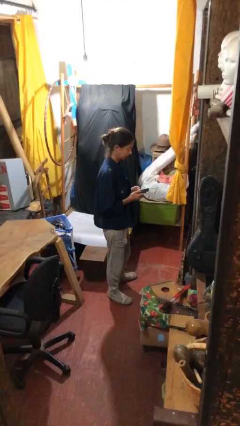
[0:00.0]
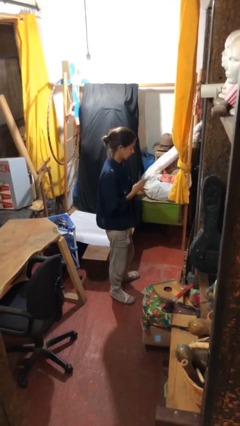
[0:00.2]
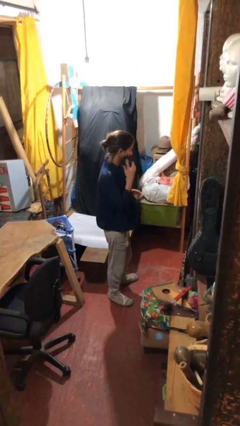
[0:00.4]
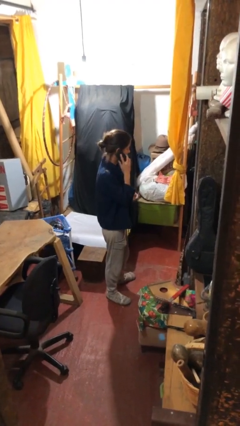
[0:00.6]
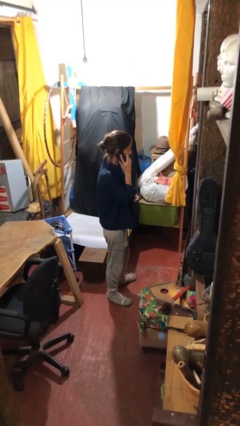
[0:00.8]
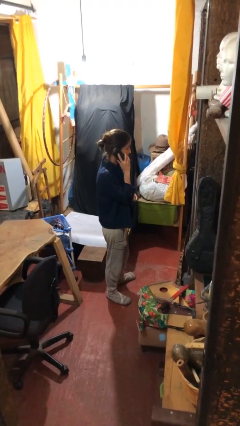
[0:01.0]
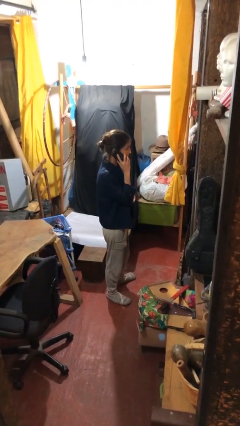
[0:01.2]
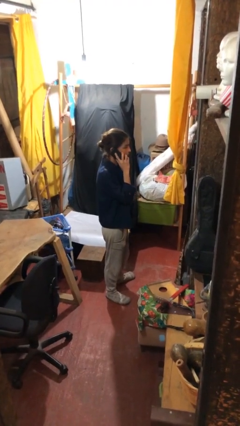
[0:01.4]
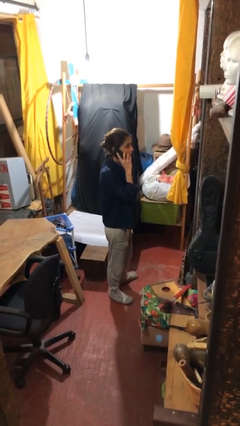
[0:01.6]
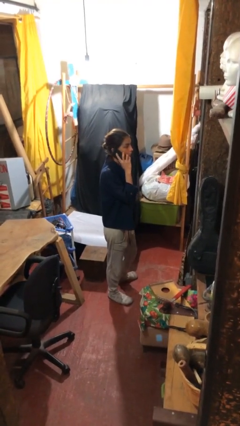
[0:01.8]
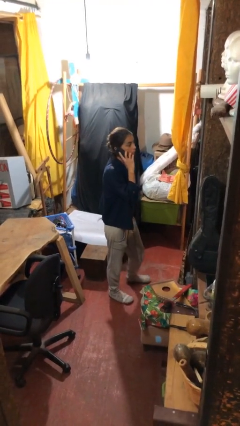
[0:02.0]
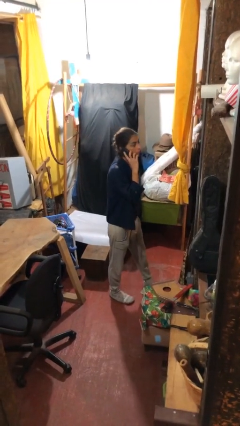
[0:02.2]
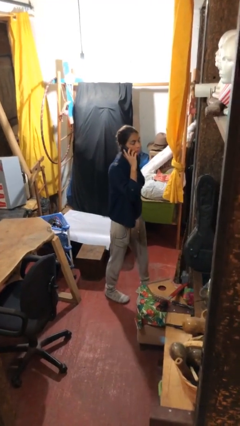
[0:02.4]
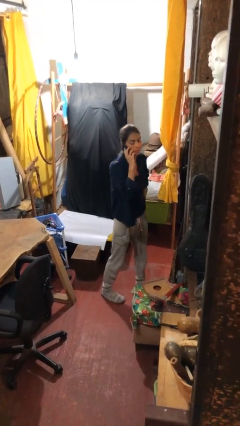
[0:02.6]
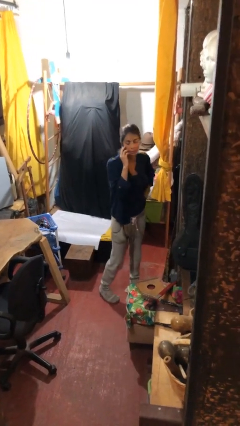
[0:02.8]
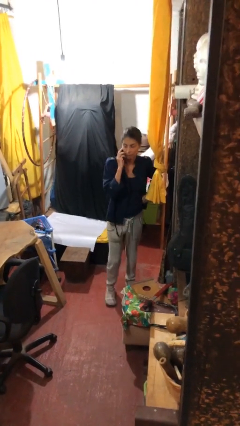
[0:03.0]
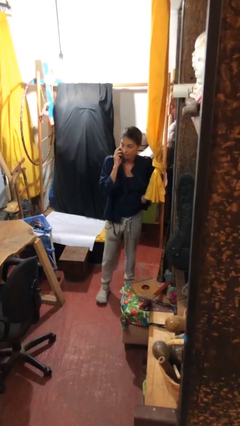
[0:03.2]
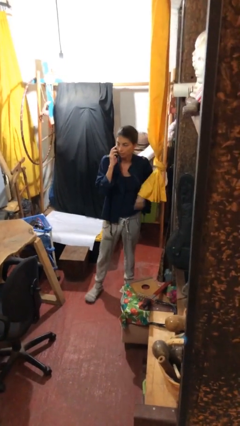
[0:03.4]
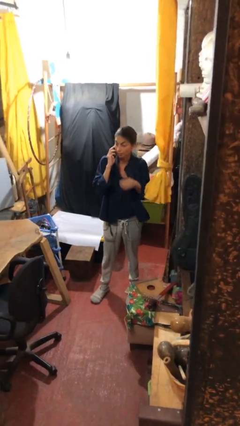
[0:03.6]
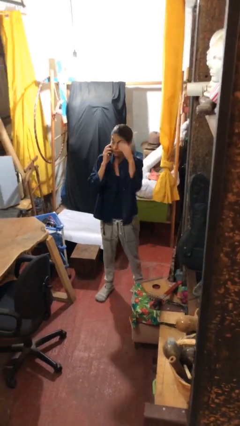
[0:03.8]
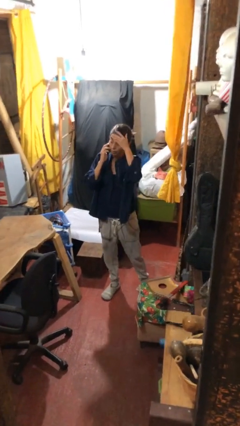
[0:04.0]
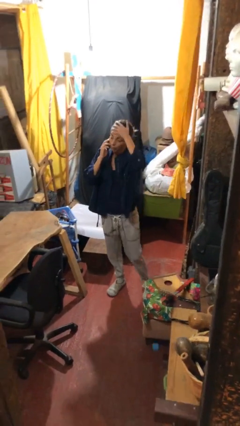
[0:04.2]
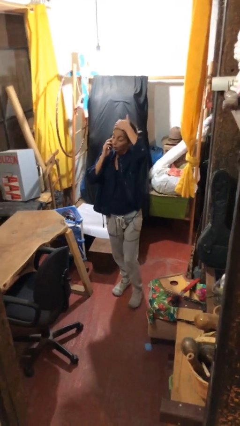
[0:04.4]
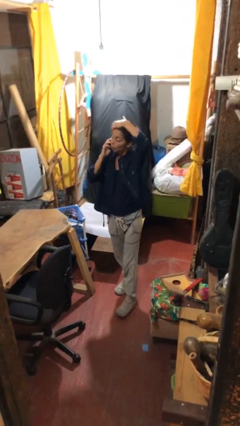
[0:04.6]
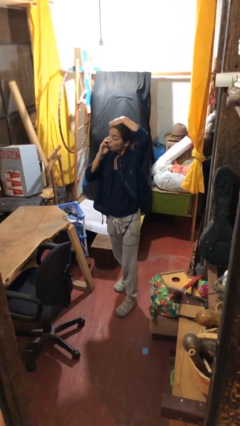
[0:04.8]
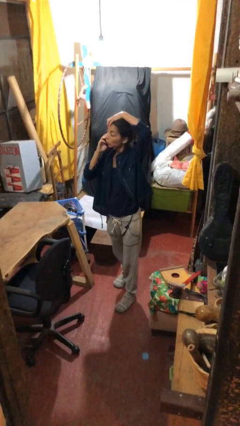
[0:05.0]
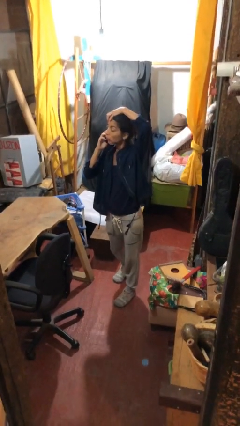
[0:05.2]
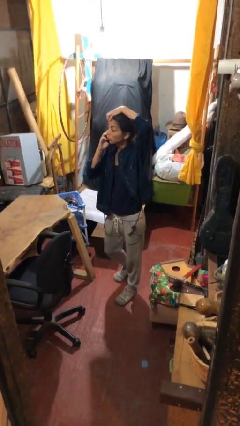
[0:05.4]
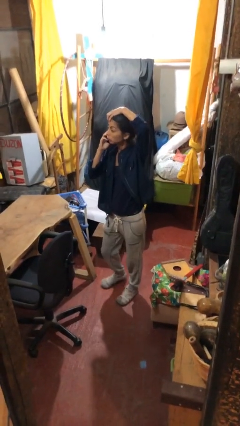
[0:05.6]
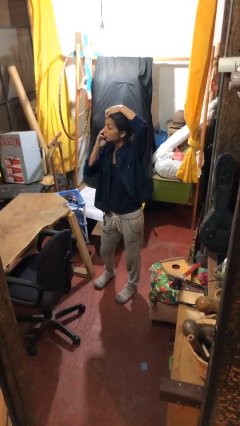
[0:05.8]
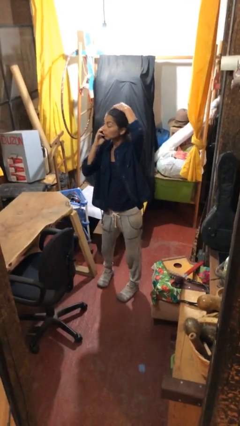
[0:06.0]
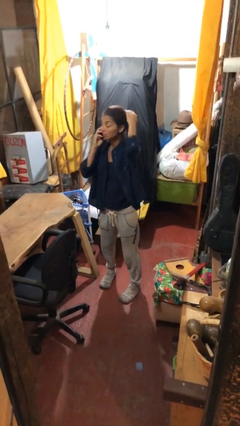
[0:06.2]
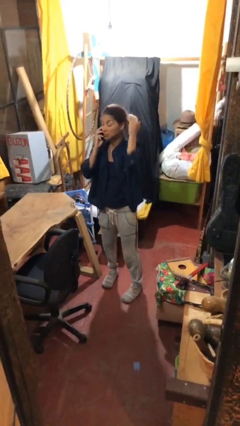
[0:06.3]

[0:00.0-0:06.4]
person talks on phone

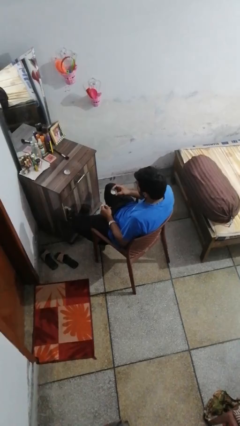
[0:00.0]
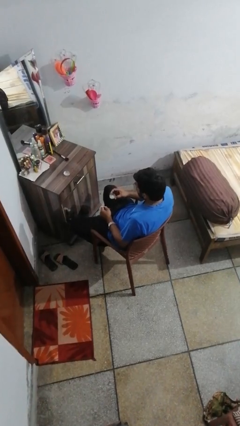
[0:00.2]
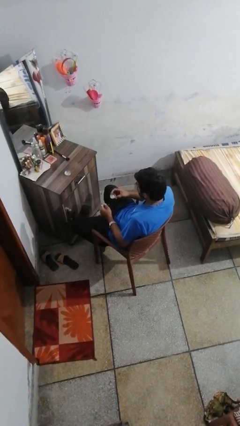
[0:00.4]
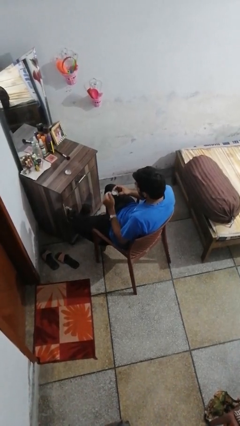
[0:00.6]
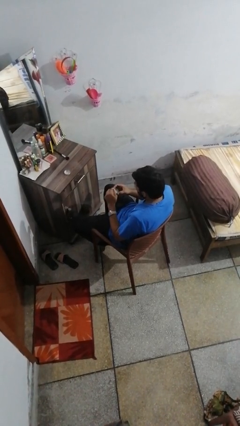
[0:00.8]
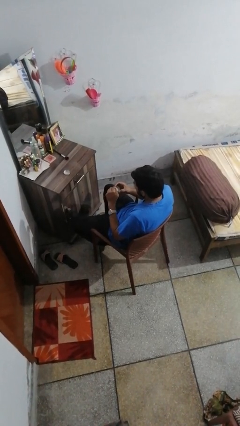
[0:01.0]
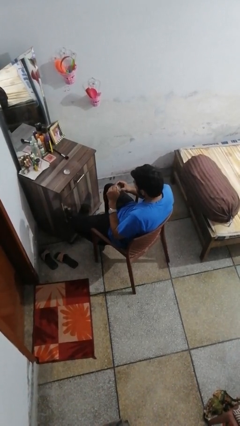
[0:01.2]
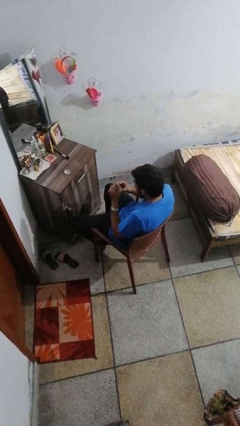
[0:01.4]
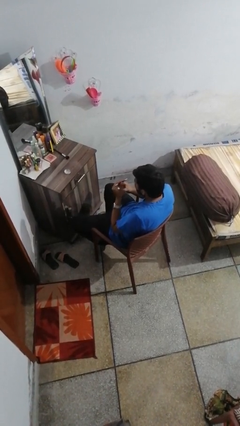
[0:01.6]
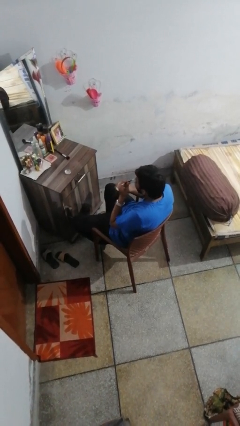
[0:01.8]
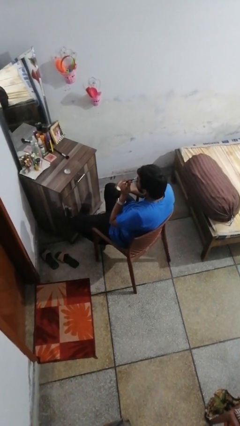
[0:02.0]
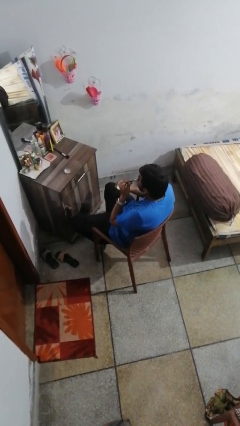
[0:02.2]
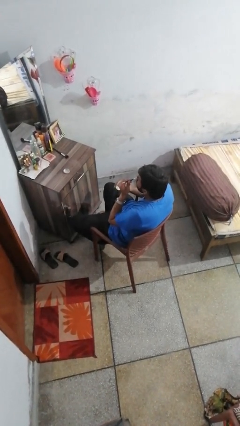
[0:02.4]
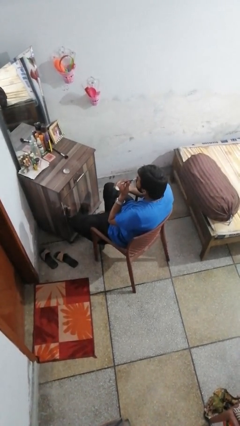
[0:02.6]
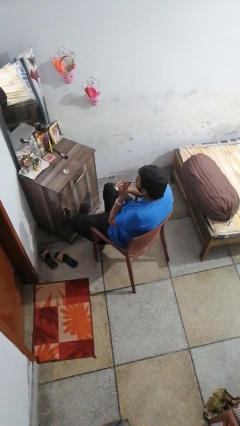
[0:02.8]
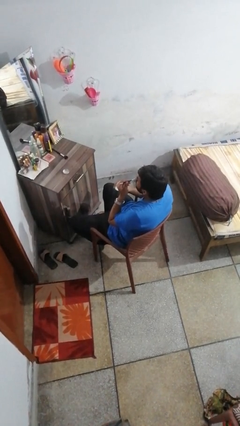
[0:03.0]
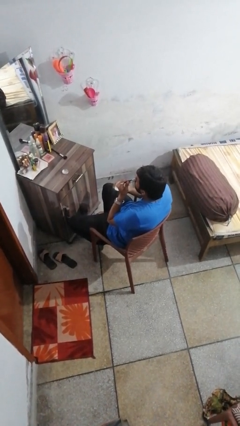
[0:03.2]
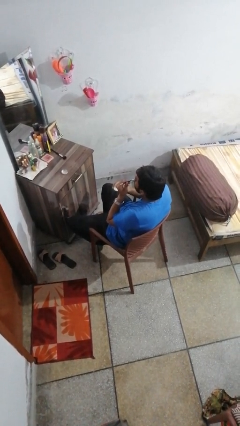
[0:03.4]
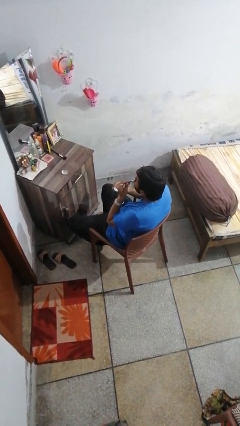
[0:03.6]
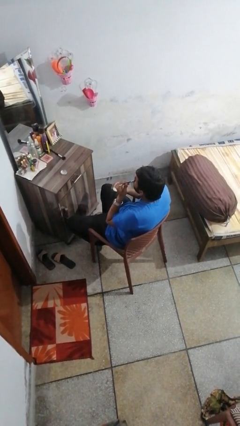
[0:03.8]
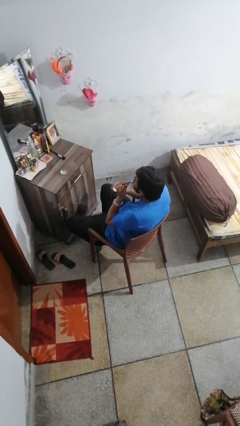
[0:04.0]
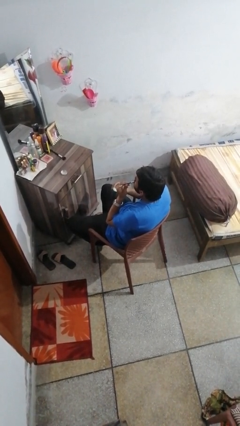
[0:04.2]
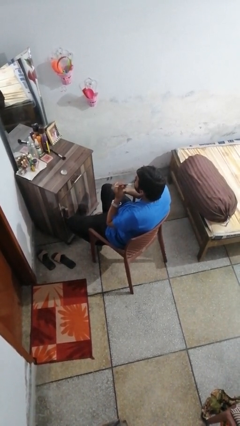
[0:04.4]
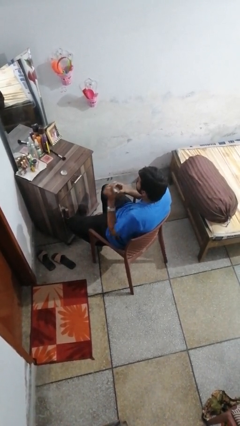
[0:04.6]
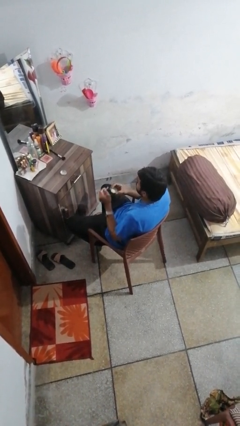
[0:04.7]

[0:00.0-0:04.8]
person applies eye makeup

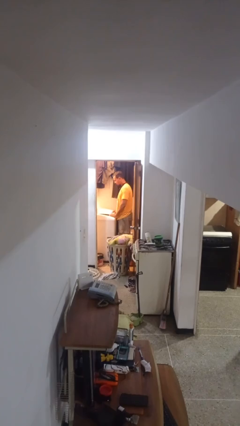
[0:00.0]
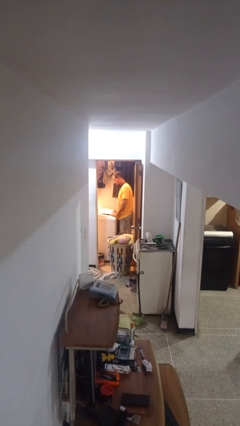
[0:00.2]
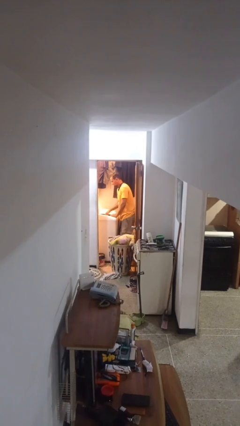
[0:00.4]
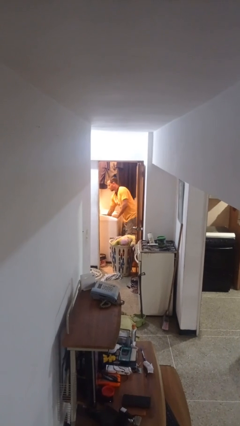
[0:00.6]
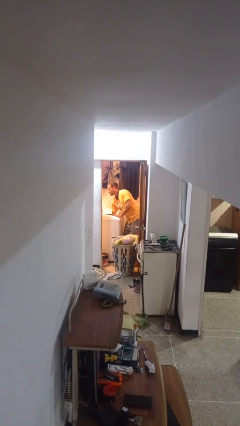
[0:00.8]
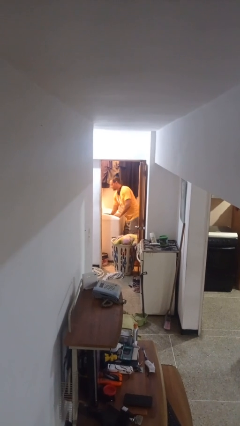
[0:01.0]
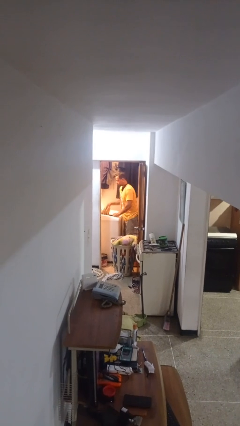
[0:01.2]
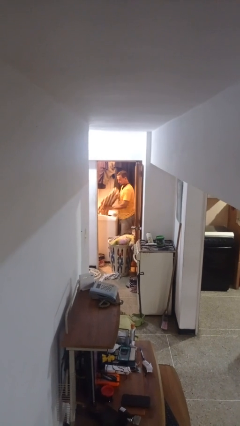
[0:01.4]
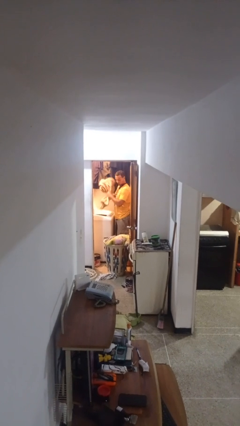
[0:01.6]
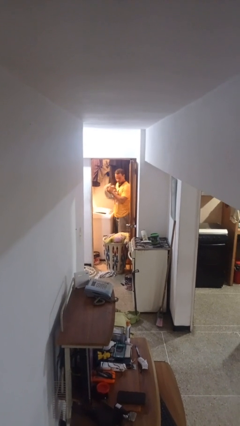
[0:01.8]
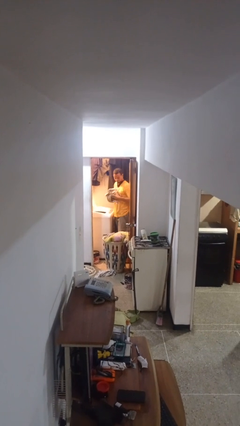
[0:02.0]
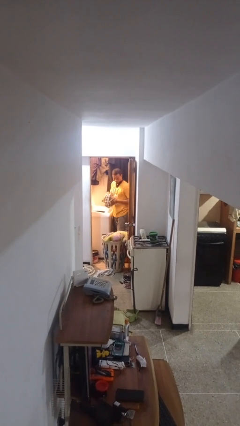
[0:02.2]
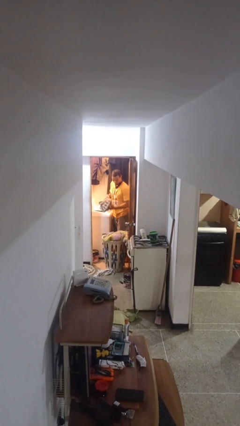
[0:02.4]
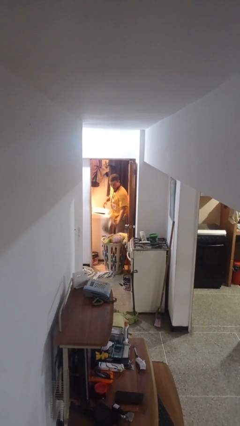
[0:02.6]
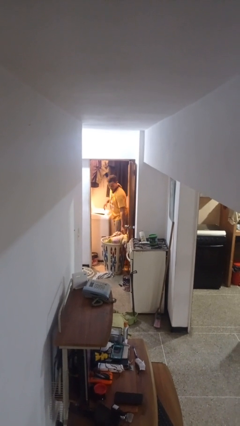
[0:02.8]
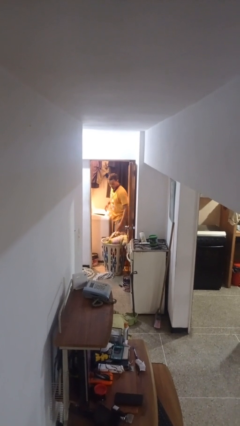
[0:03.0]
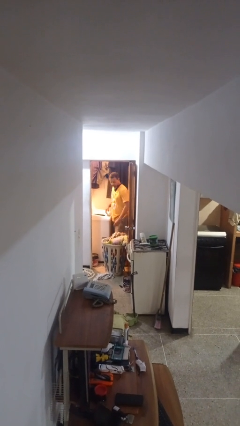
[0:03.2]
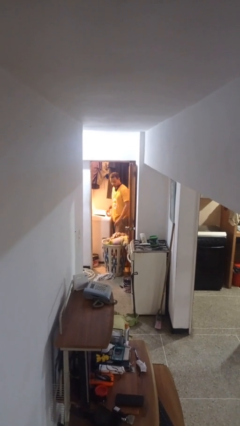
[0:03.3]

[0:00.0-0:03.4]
person loads clotheswasher

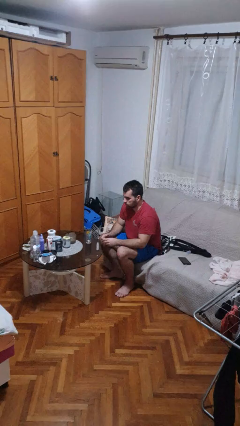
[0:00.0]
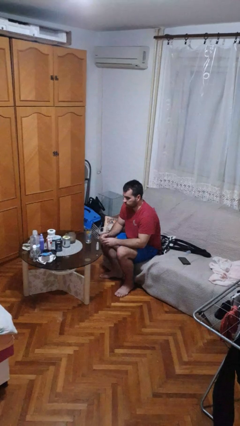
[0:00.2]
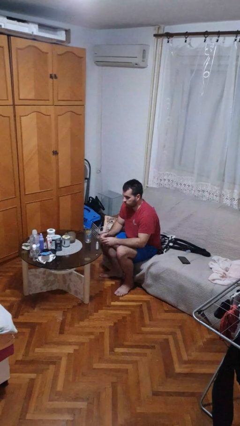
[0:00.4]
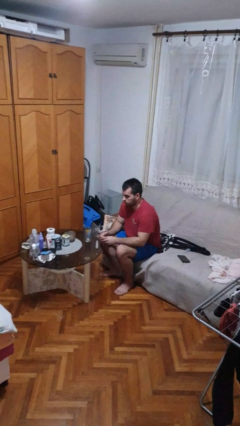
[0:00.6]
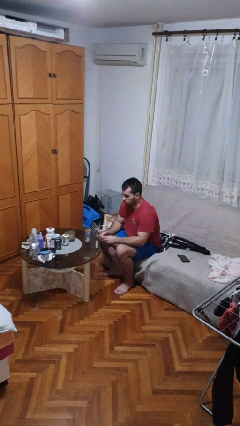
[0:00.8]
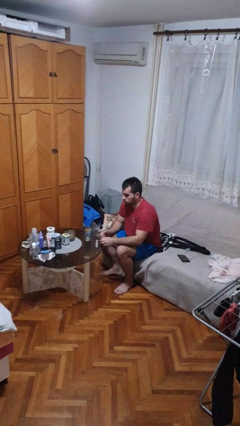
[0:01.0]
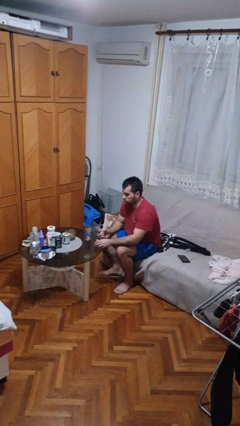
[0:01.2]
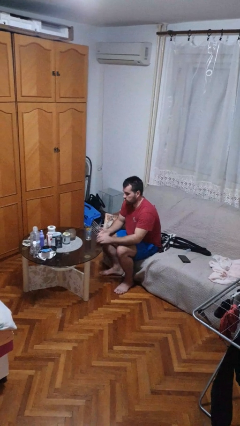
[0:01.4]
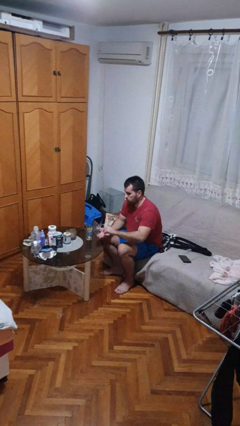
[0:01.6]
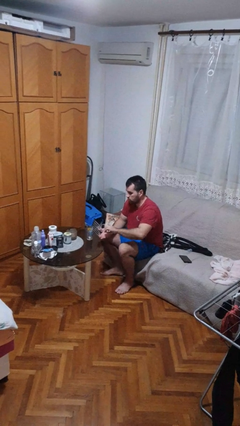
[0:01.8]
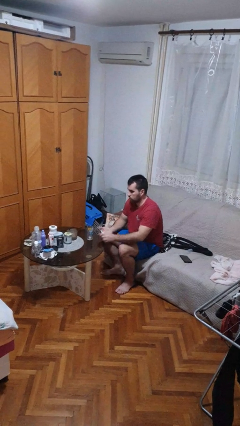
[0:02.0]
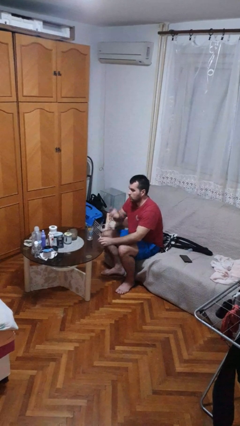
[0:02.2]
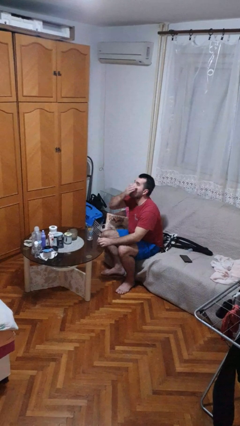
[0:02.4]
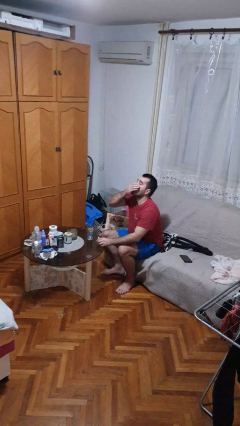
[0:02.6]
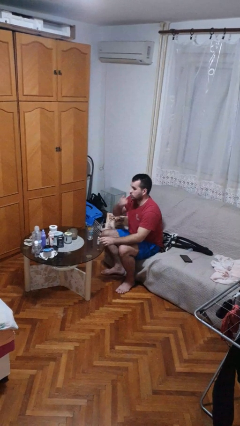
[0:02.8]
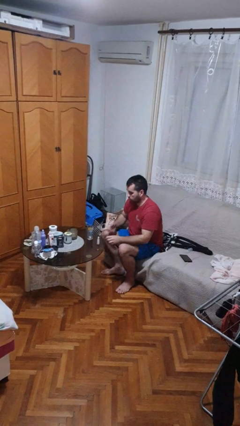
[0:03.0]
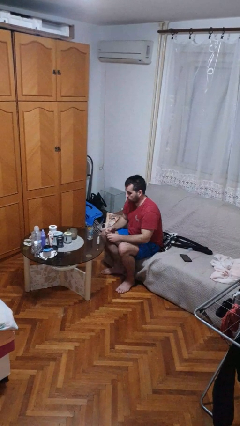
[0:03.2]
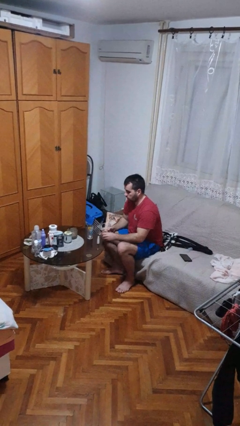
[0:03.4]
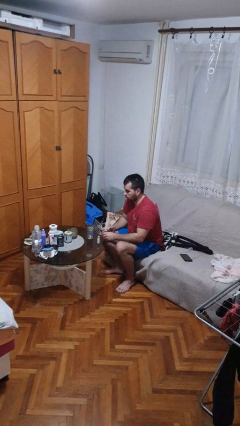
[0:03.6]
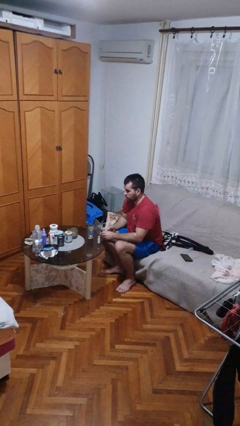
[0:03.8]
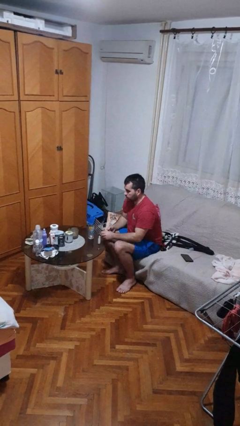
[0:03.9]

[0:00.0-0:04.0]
person takes medicine pills
